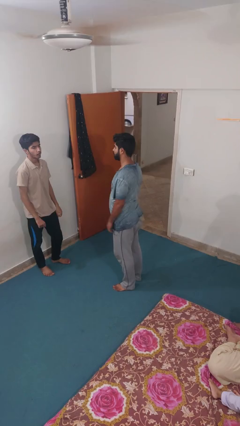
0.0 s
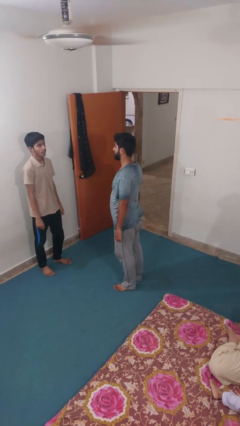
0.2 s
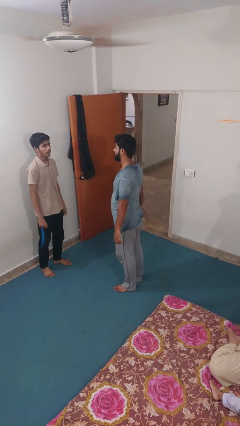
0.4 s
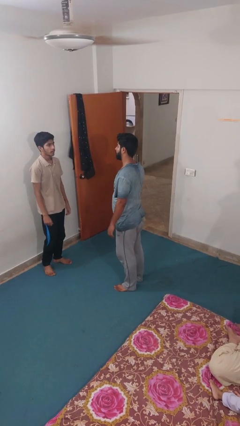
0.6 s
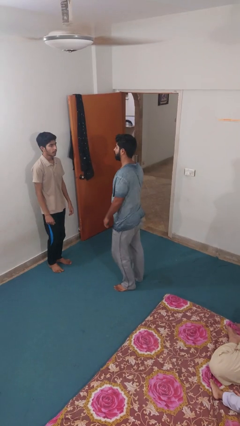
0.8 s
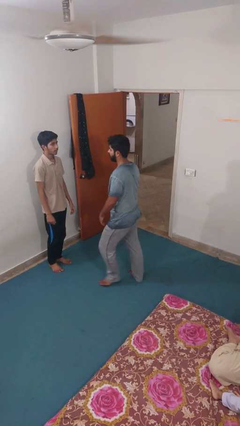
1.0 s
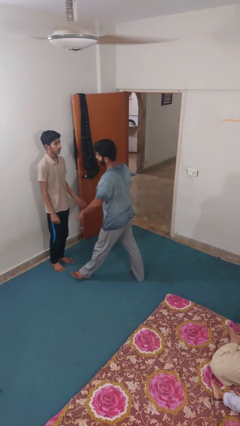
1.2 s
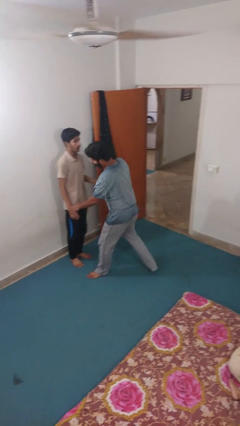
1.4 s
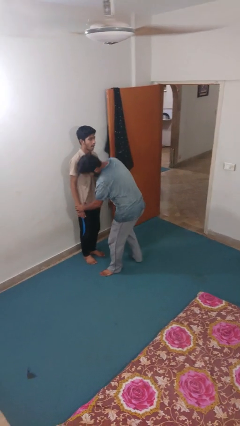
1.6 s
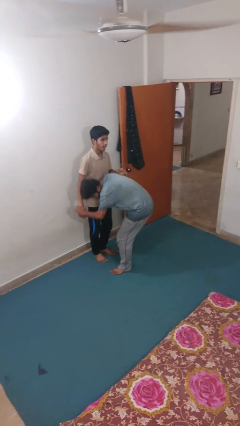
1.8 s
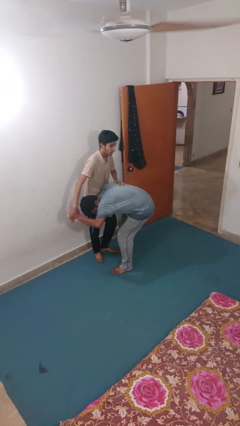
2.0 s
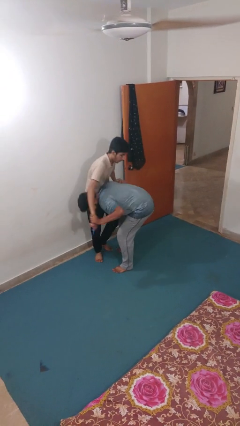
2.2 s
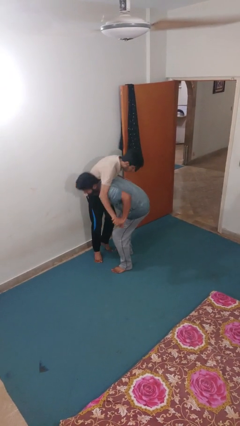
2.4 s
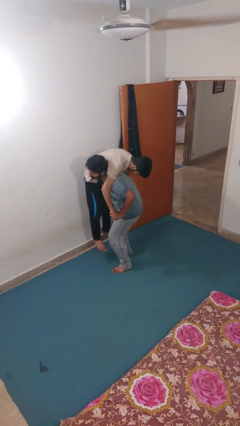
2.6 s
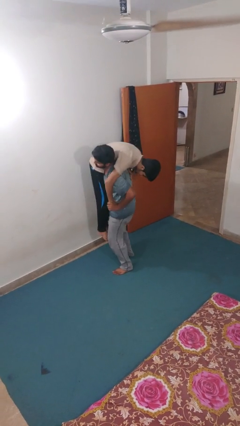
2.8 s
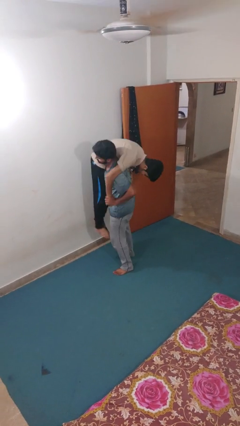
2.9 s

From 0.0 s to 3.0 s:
person carries person over shoulder

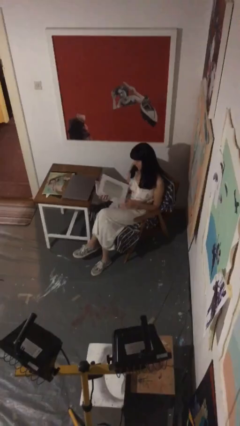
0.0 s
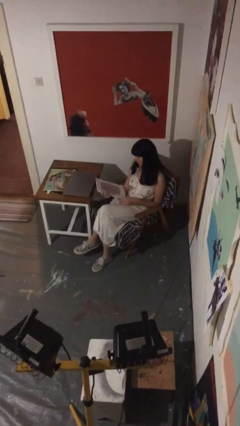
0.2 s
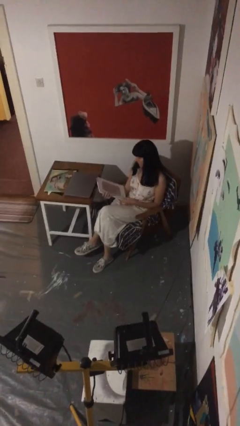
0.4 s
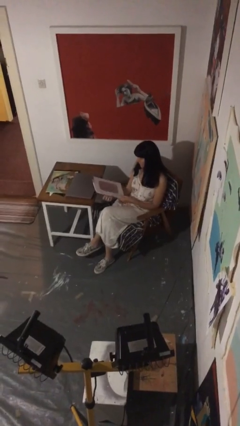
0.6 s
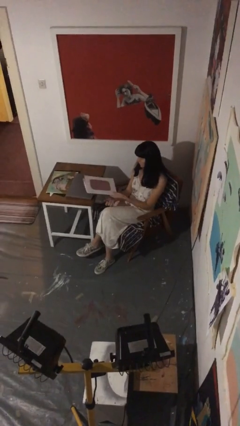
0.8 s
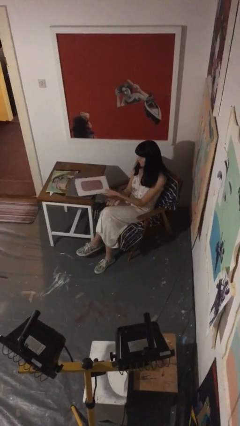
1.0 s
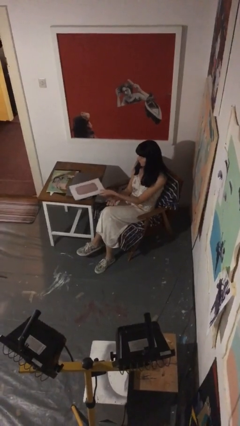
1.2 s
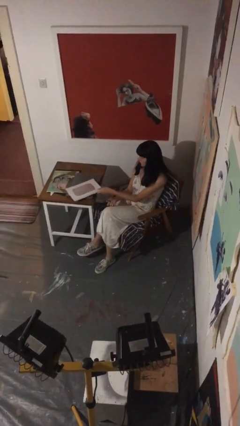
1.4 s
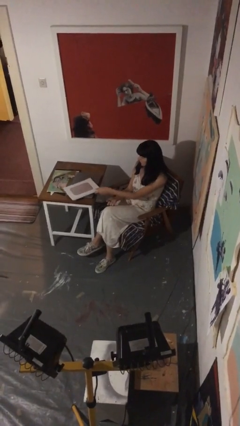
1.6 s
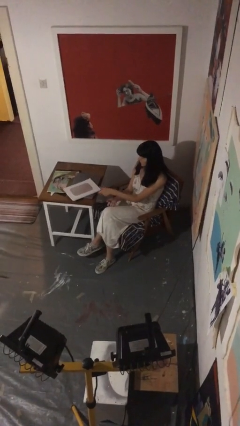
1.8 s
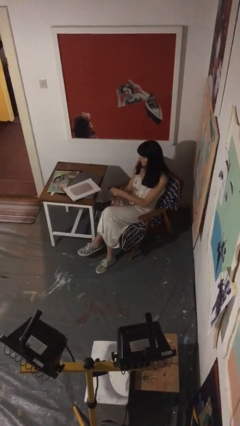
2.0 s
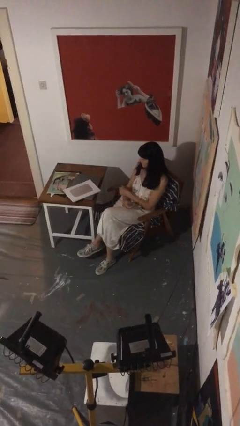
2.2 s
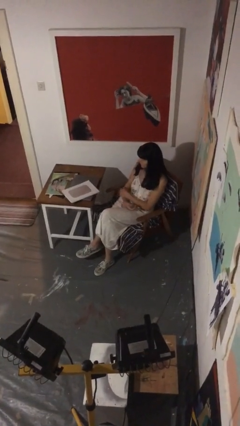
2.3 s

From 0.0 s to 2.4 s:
person puts down object on table

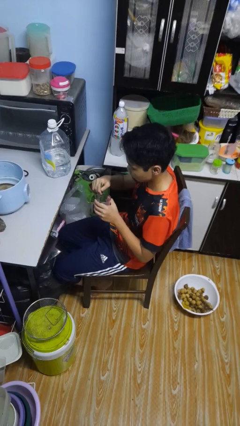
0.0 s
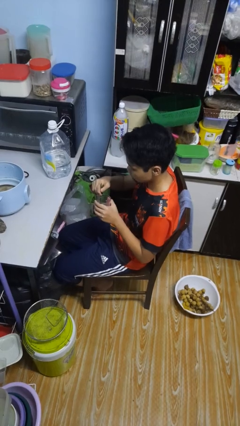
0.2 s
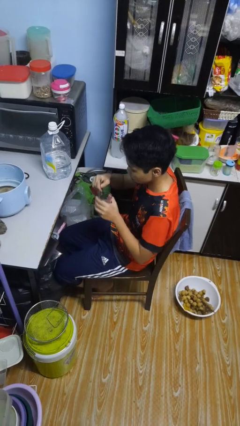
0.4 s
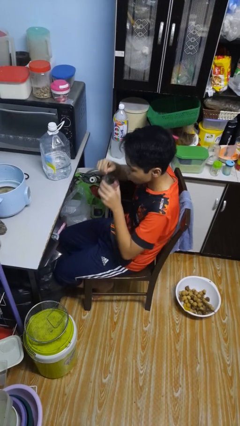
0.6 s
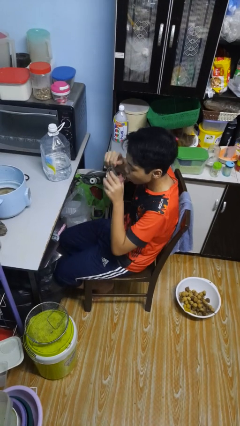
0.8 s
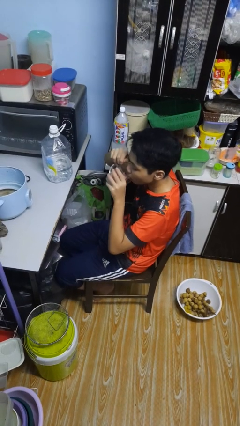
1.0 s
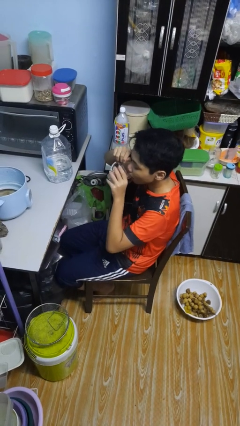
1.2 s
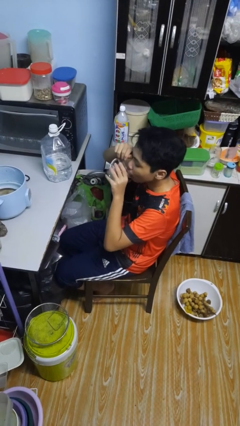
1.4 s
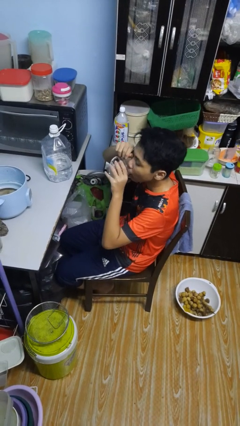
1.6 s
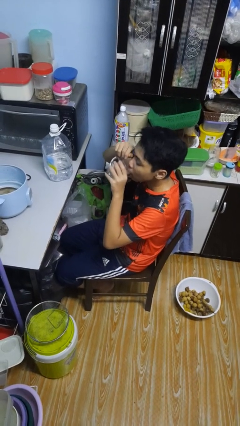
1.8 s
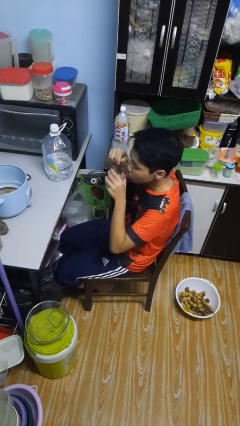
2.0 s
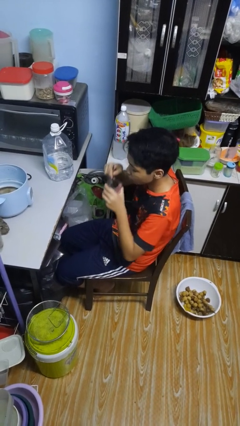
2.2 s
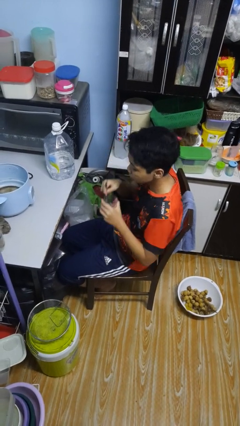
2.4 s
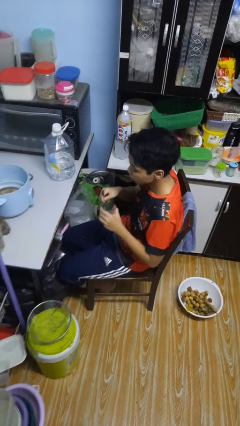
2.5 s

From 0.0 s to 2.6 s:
person drinks from mug

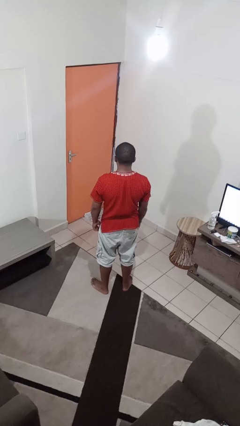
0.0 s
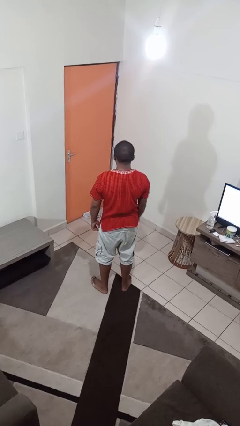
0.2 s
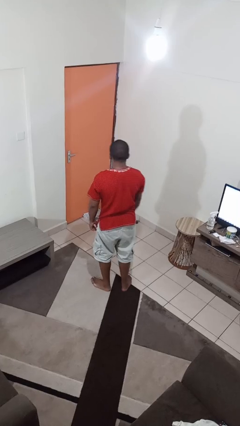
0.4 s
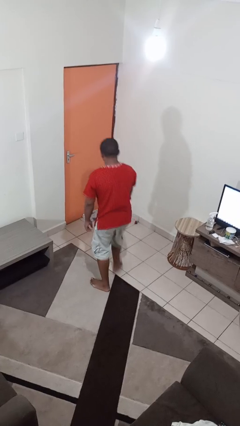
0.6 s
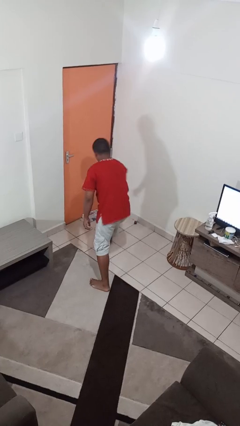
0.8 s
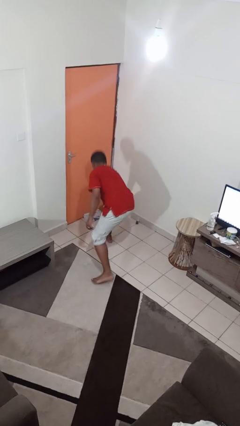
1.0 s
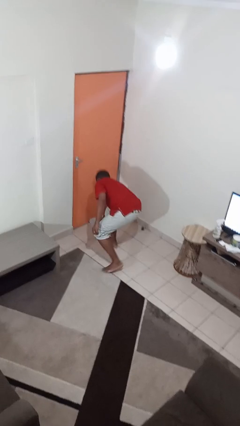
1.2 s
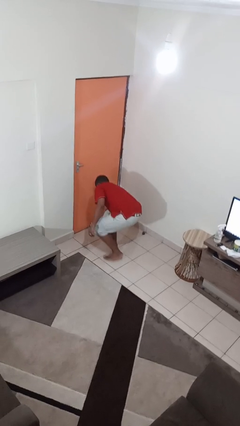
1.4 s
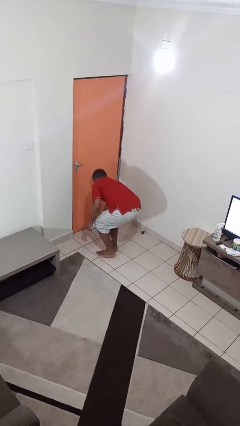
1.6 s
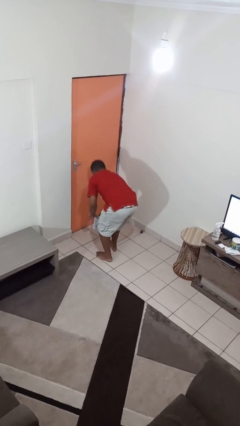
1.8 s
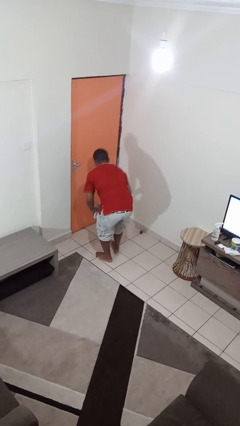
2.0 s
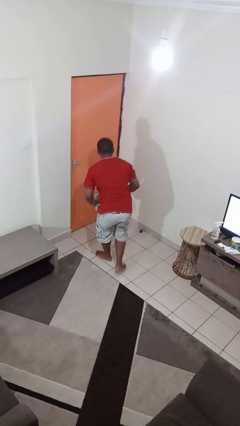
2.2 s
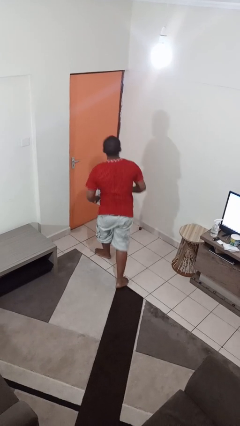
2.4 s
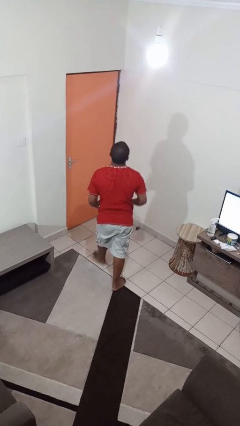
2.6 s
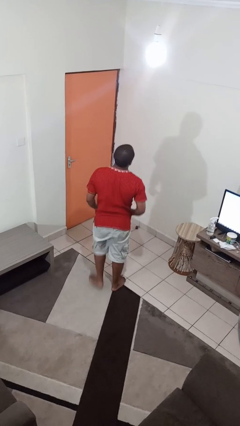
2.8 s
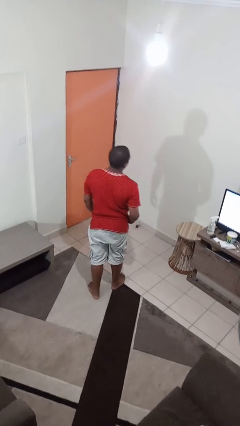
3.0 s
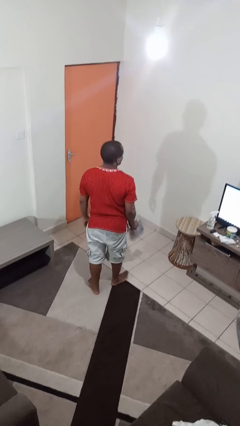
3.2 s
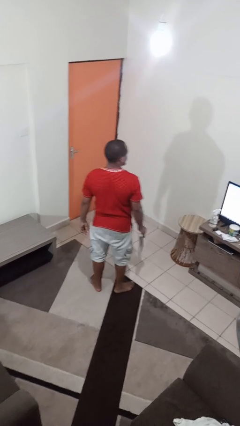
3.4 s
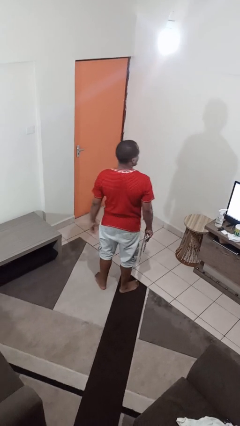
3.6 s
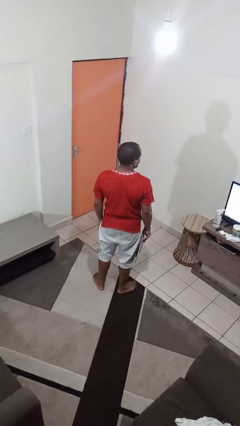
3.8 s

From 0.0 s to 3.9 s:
person picks up object from floor

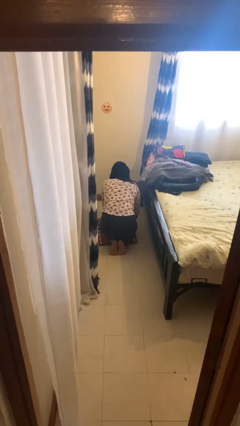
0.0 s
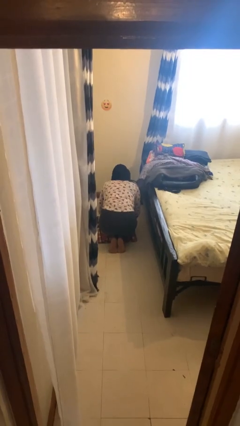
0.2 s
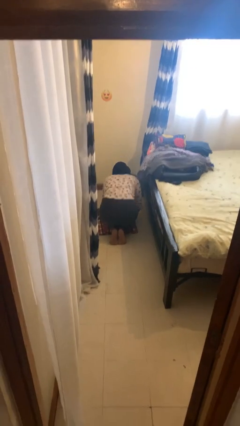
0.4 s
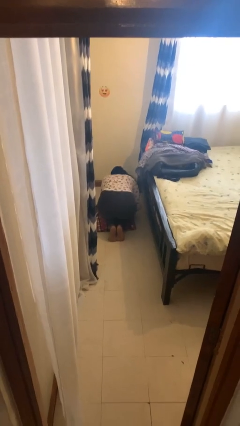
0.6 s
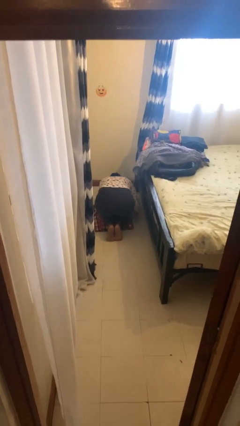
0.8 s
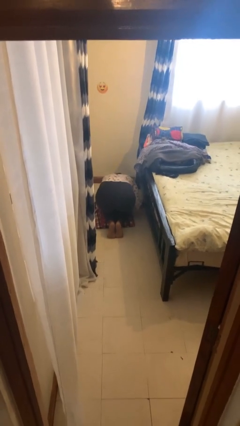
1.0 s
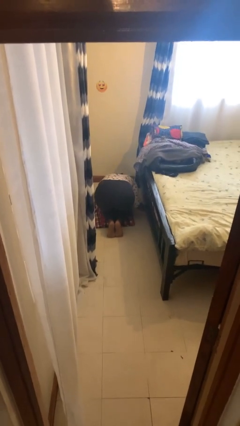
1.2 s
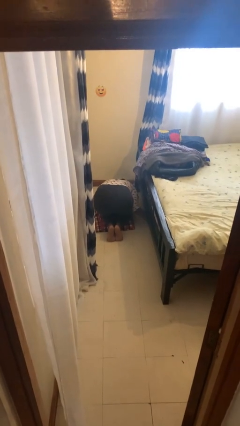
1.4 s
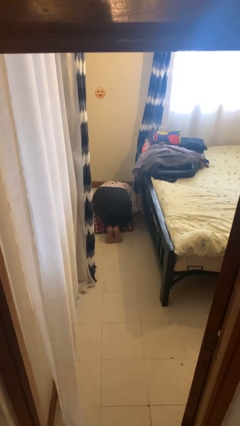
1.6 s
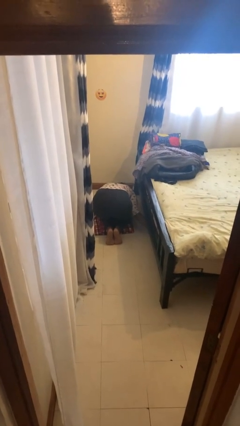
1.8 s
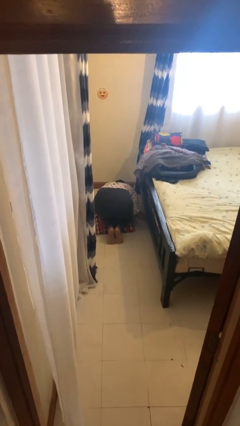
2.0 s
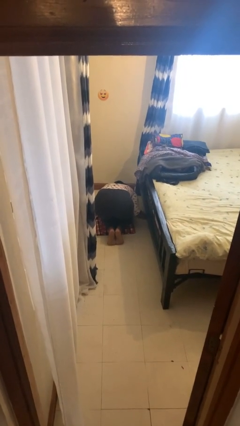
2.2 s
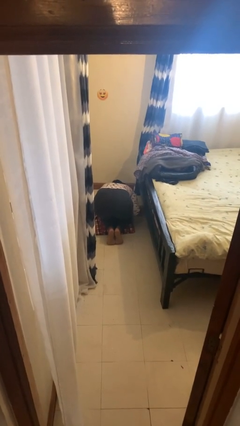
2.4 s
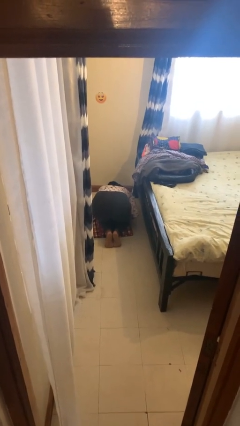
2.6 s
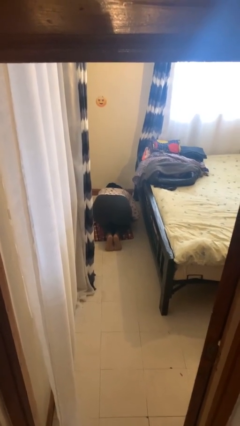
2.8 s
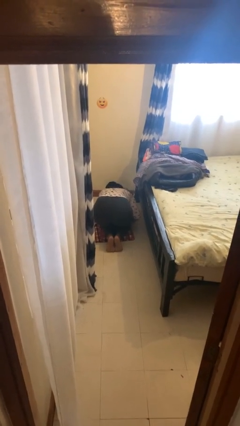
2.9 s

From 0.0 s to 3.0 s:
person searches under bed

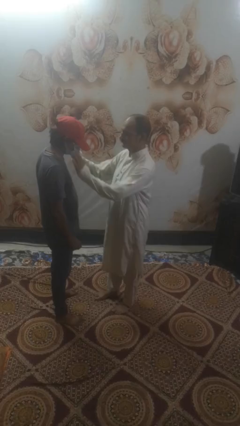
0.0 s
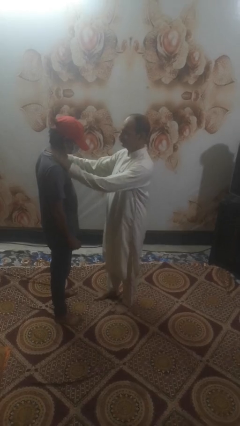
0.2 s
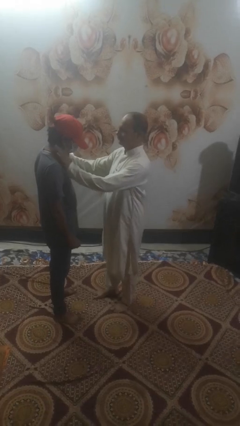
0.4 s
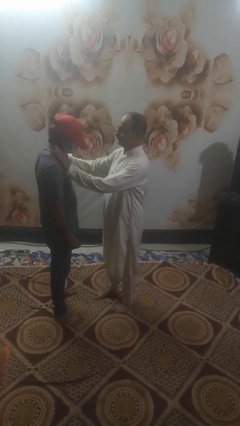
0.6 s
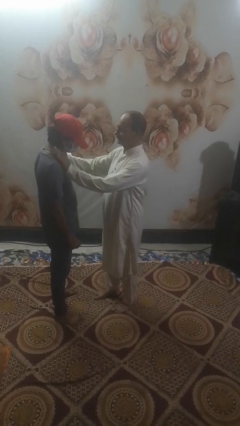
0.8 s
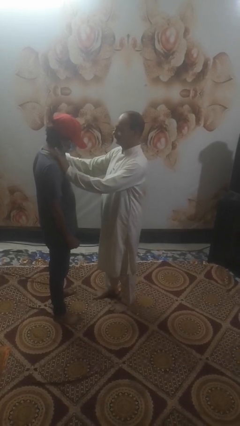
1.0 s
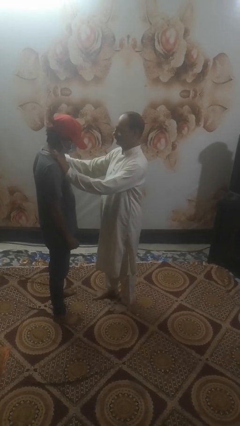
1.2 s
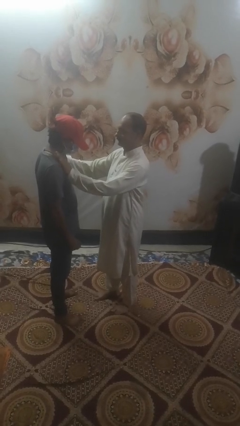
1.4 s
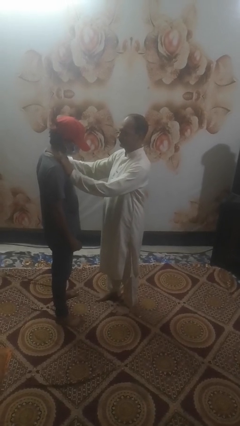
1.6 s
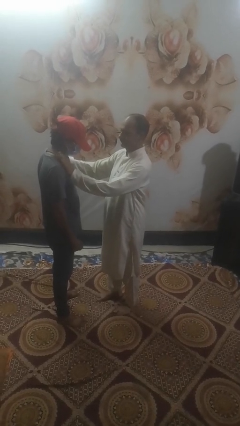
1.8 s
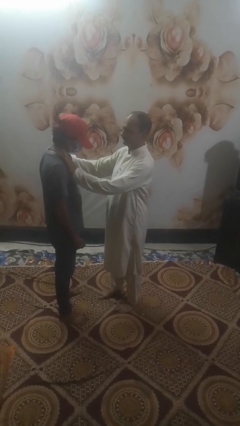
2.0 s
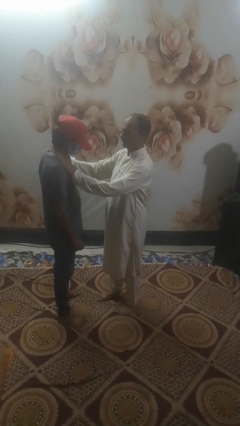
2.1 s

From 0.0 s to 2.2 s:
person pounds shoulders of person

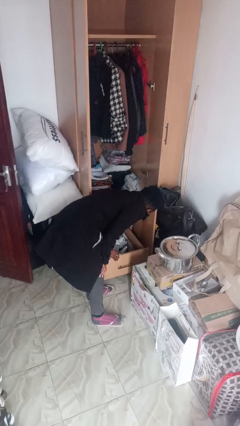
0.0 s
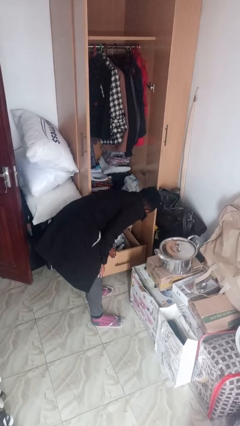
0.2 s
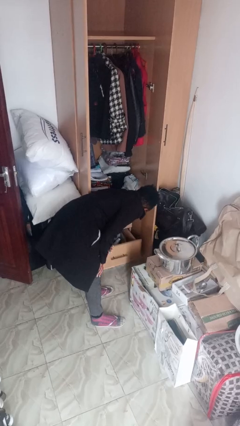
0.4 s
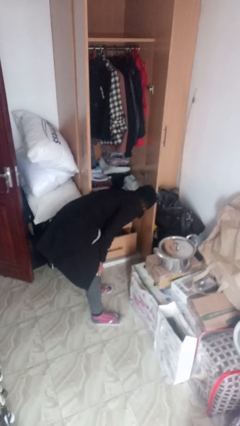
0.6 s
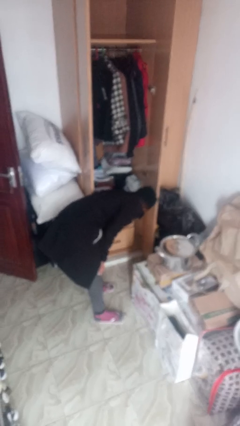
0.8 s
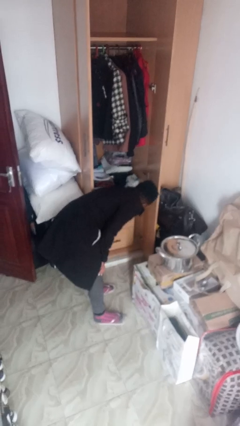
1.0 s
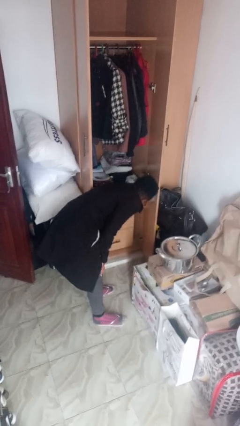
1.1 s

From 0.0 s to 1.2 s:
person closes dresser drawer
